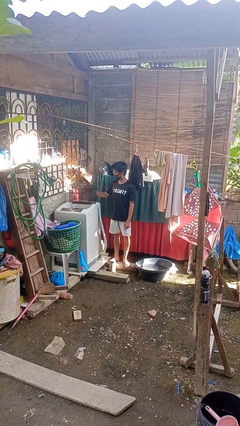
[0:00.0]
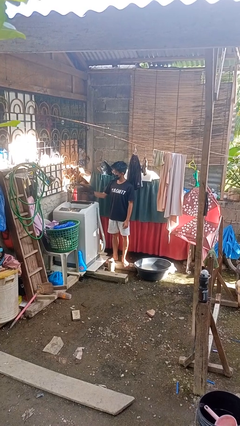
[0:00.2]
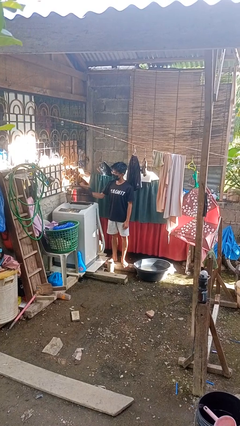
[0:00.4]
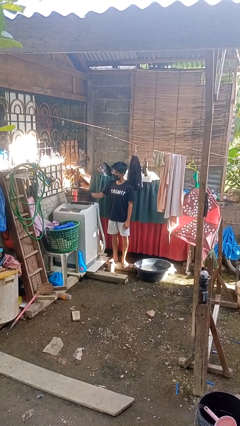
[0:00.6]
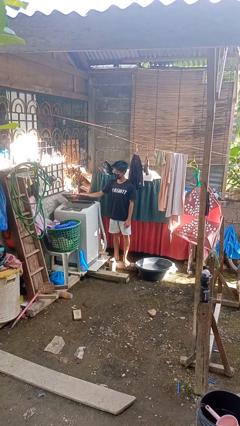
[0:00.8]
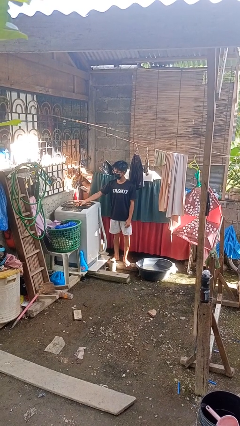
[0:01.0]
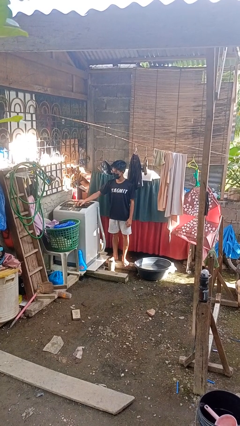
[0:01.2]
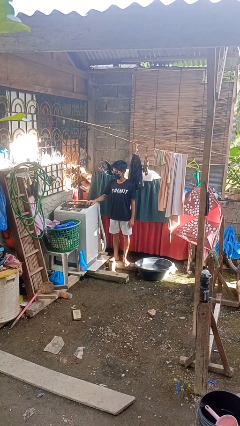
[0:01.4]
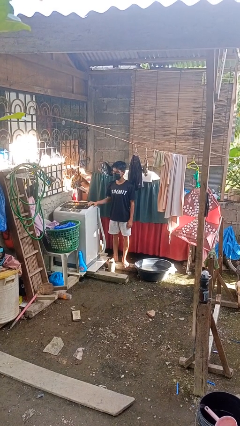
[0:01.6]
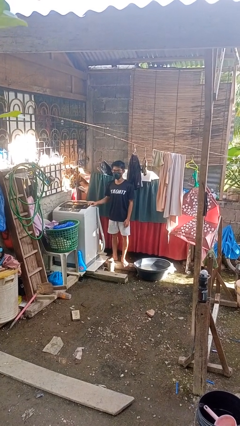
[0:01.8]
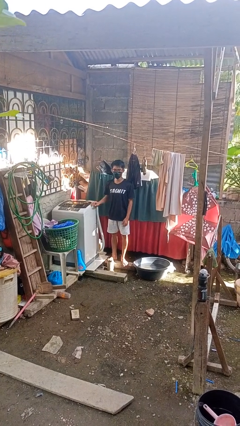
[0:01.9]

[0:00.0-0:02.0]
person closes clothes washer

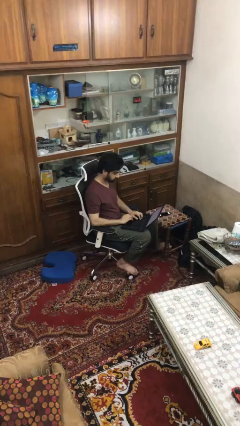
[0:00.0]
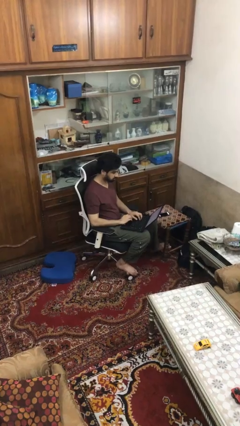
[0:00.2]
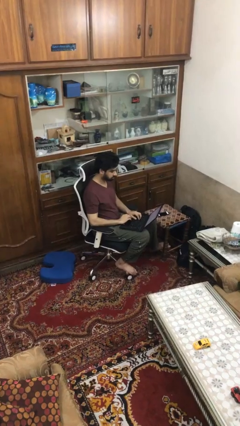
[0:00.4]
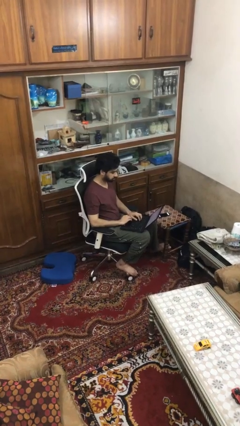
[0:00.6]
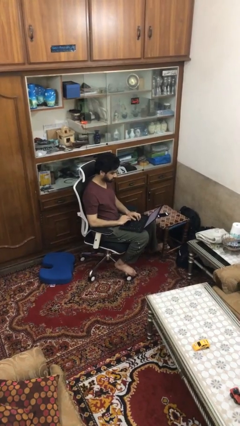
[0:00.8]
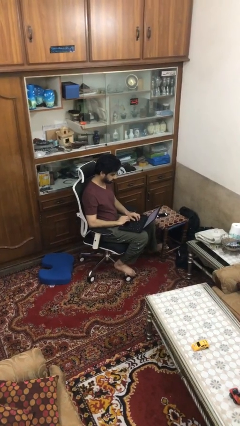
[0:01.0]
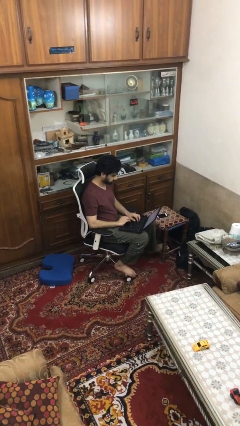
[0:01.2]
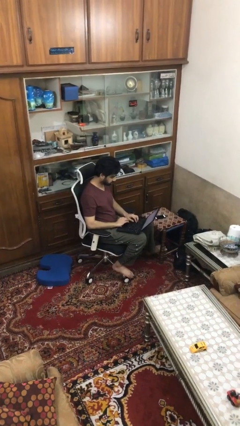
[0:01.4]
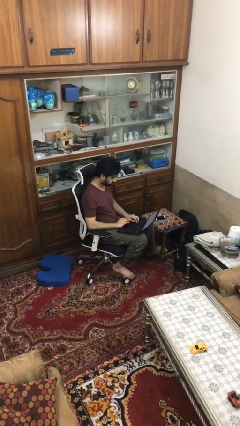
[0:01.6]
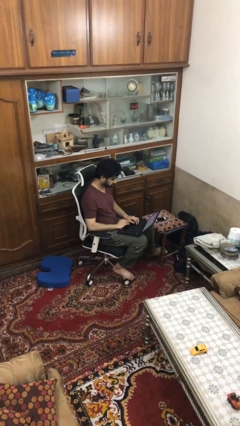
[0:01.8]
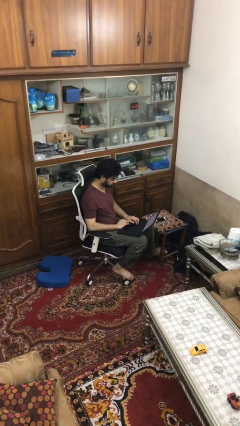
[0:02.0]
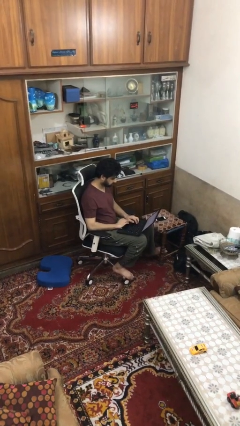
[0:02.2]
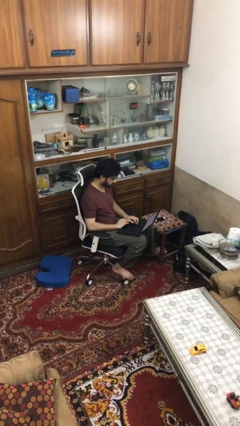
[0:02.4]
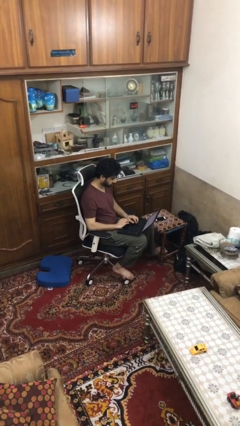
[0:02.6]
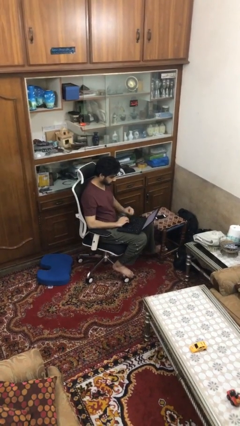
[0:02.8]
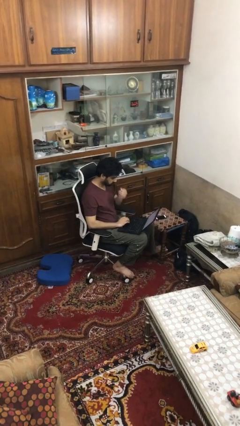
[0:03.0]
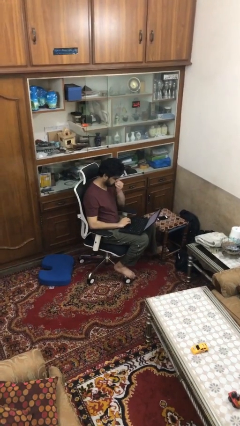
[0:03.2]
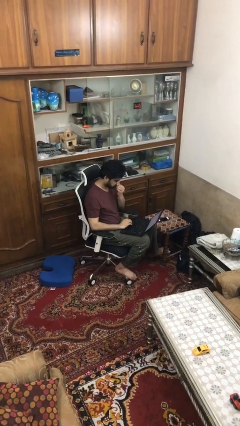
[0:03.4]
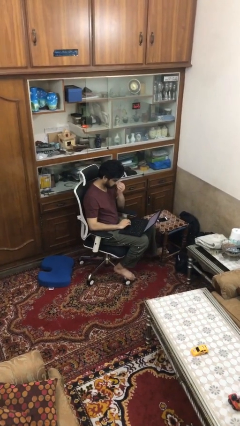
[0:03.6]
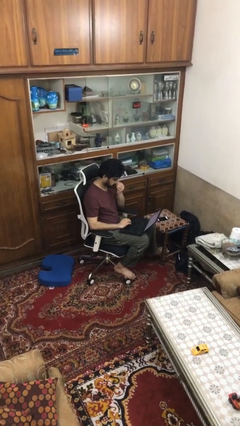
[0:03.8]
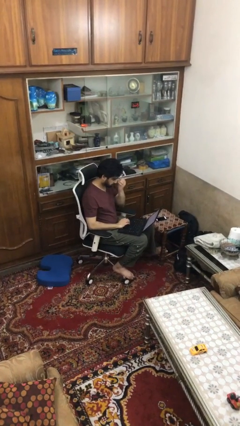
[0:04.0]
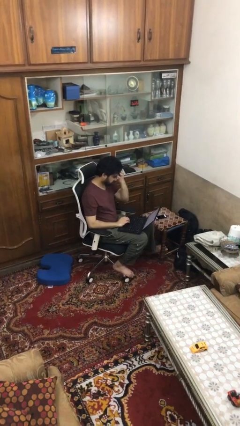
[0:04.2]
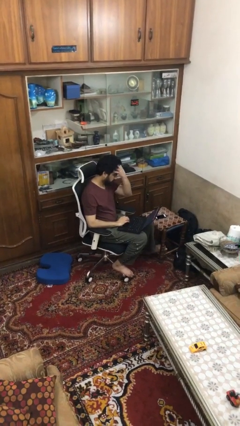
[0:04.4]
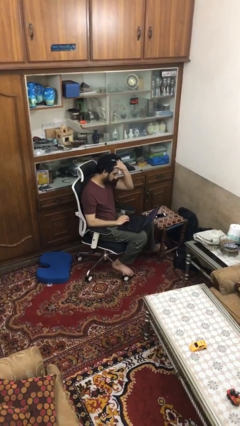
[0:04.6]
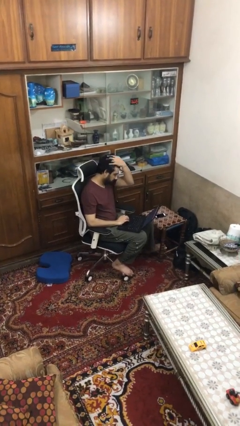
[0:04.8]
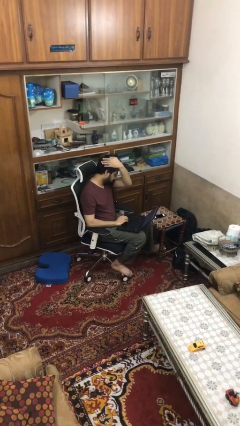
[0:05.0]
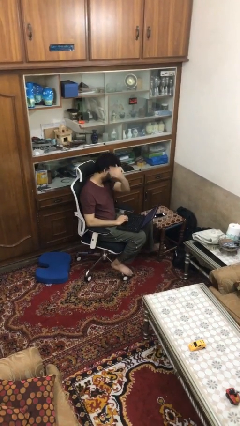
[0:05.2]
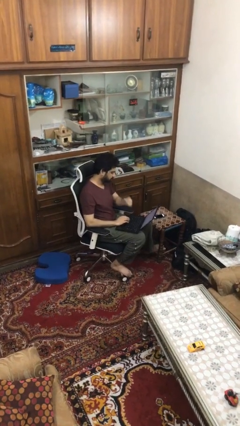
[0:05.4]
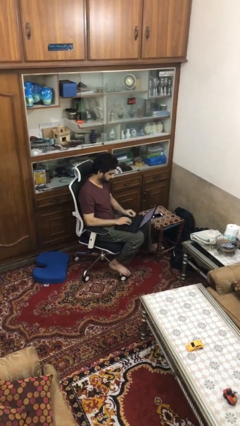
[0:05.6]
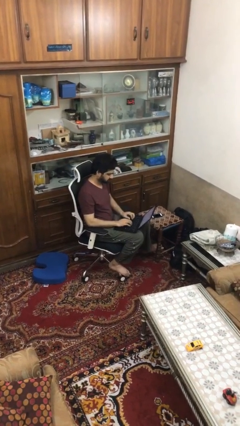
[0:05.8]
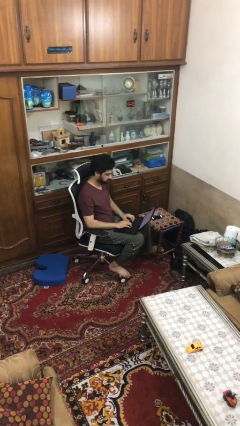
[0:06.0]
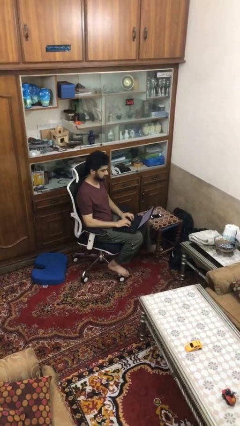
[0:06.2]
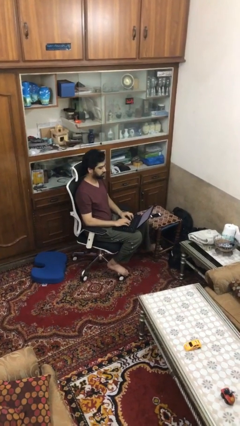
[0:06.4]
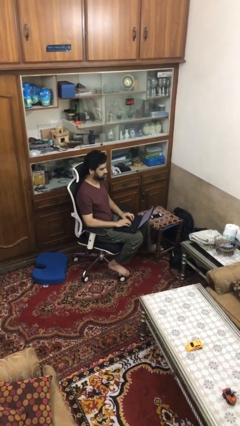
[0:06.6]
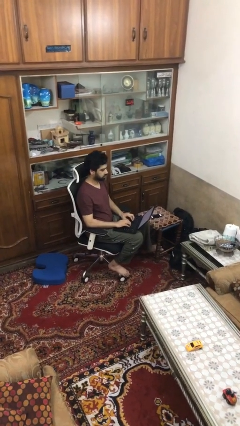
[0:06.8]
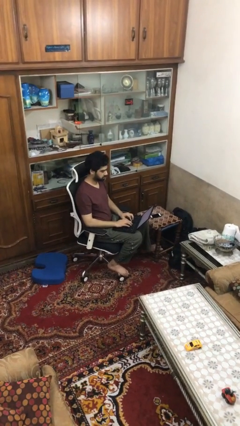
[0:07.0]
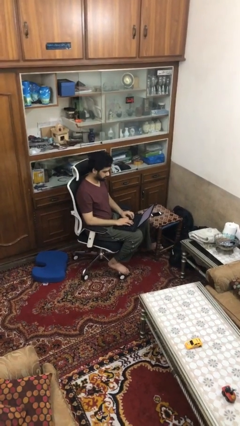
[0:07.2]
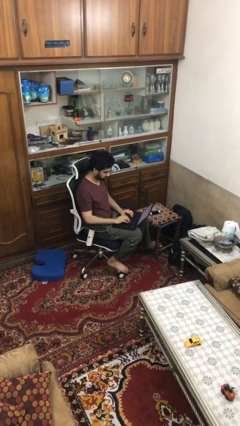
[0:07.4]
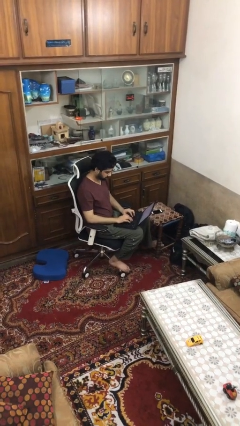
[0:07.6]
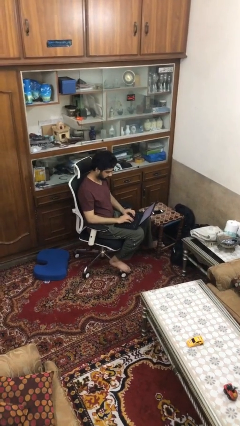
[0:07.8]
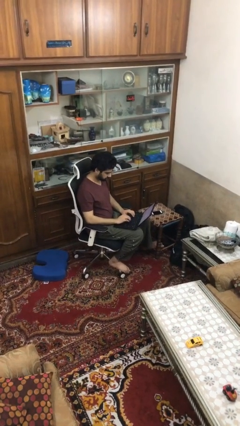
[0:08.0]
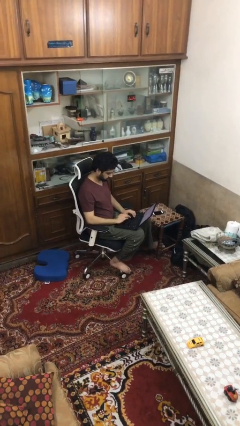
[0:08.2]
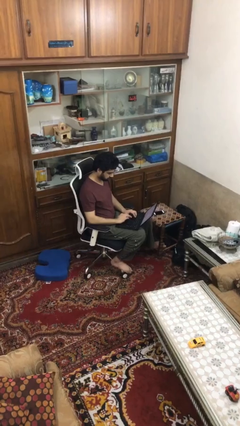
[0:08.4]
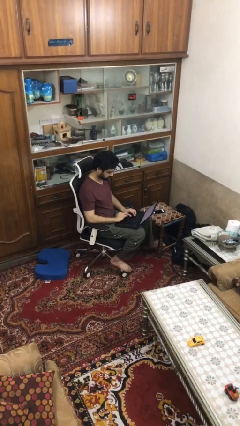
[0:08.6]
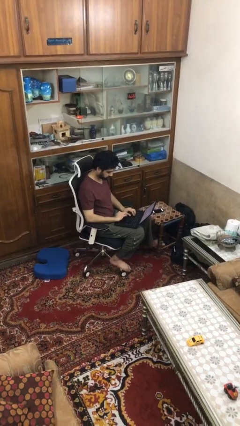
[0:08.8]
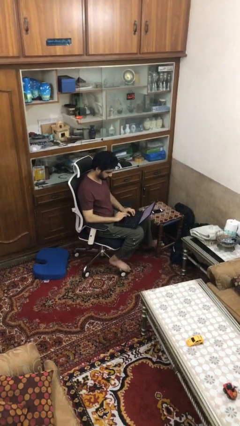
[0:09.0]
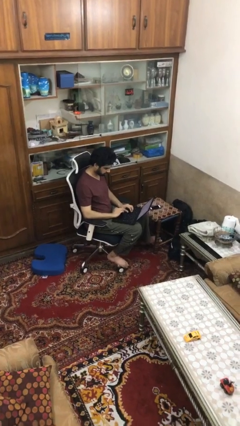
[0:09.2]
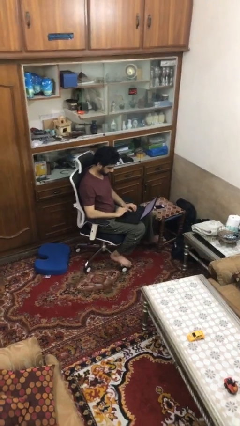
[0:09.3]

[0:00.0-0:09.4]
person interacts with laptop

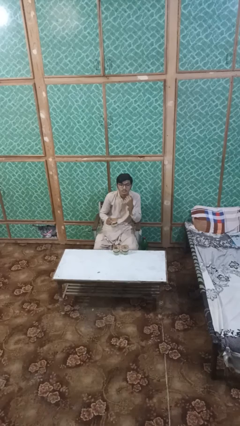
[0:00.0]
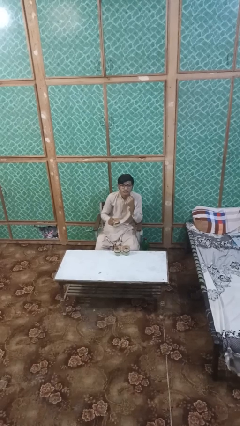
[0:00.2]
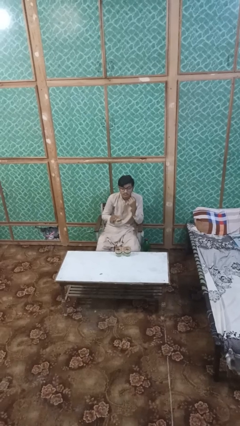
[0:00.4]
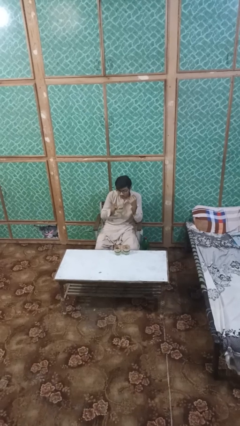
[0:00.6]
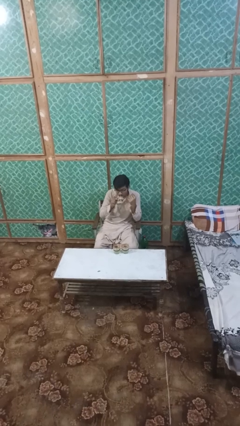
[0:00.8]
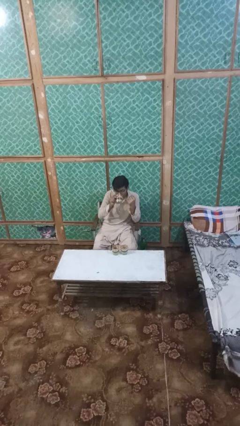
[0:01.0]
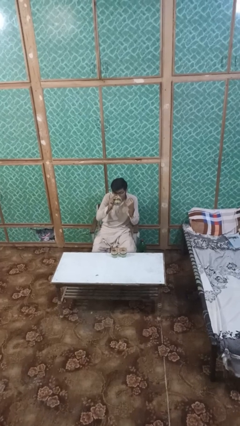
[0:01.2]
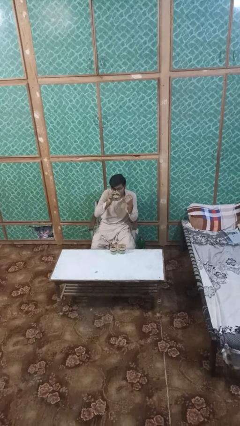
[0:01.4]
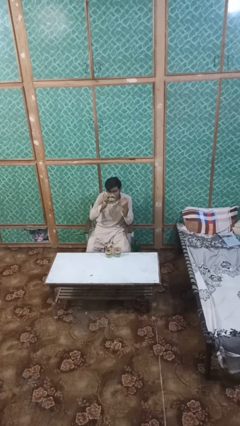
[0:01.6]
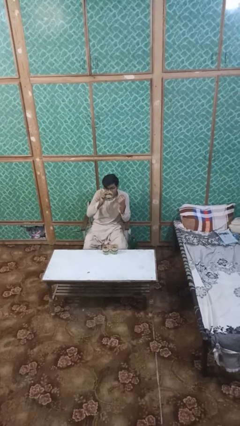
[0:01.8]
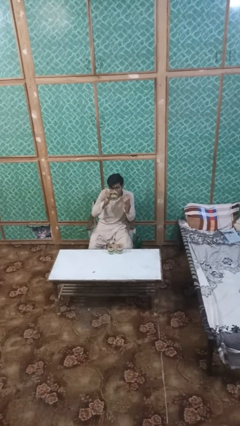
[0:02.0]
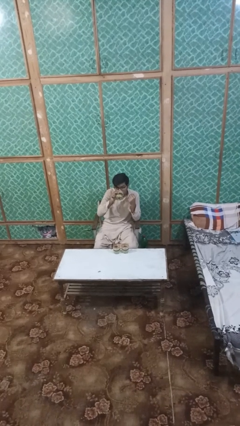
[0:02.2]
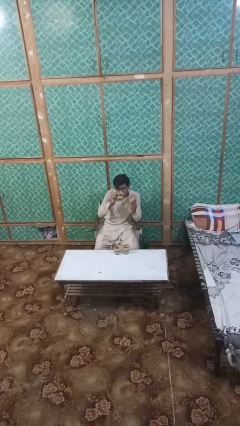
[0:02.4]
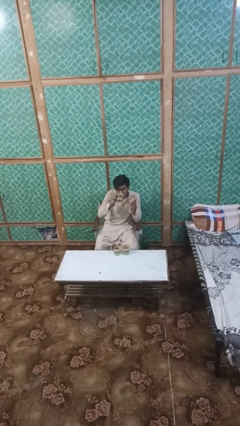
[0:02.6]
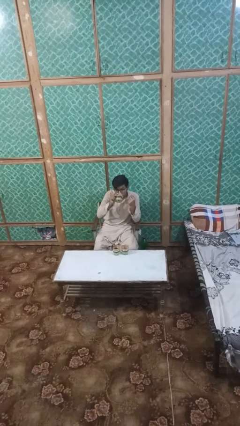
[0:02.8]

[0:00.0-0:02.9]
person drinks from shotglass

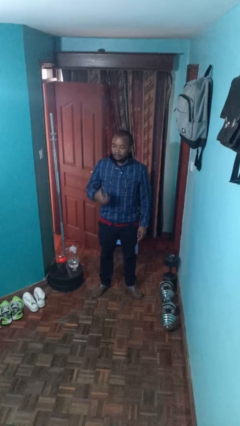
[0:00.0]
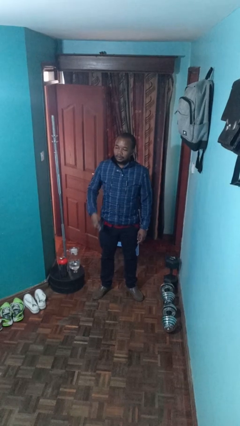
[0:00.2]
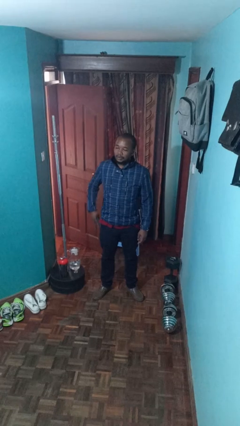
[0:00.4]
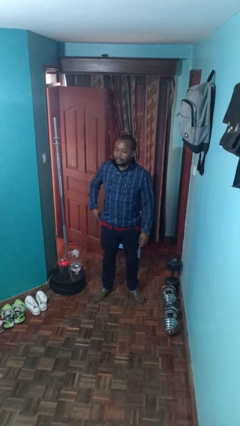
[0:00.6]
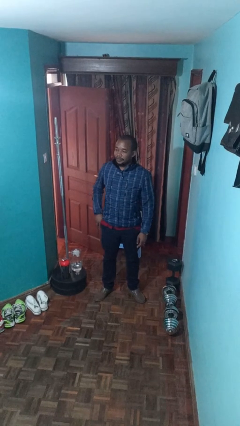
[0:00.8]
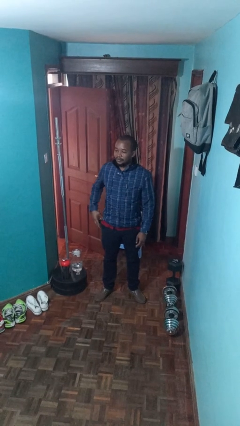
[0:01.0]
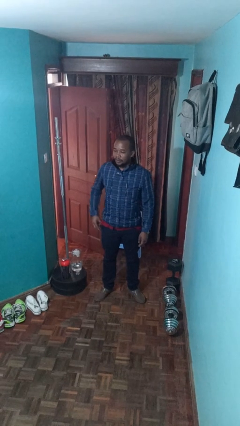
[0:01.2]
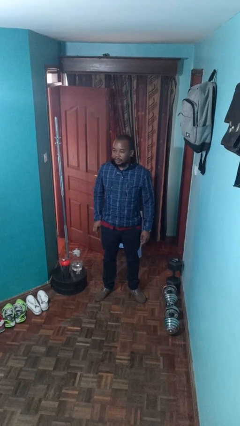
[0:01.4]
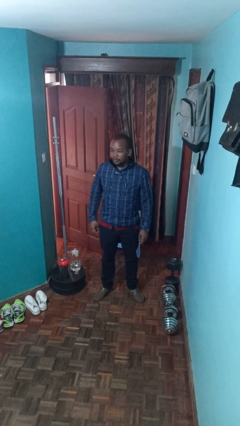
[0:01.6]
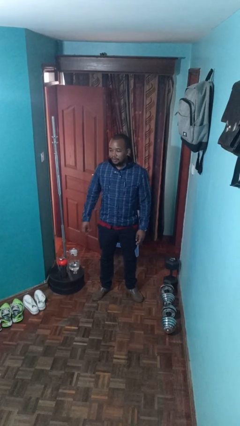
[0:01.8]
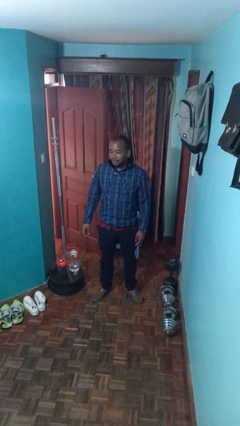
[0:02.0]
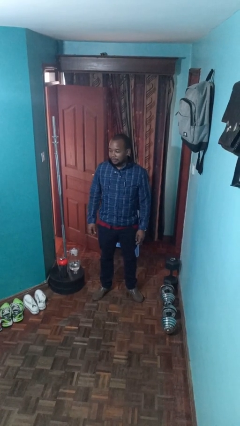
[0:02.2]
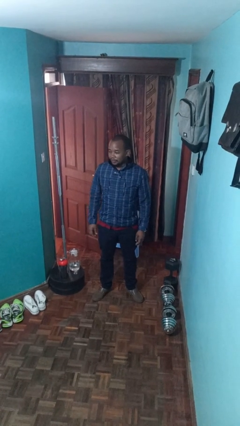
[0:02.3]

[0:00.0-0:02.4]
person puts phone into pocket

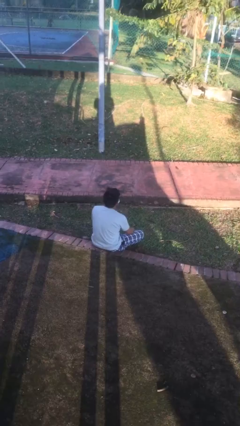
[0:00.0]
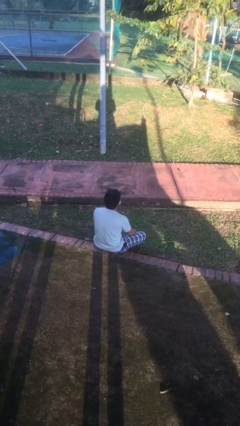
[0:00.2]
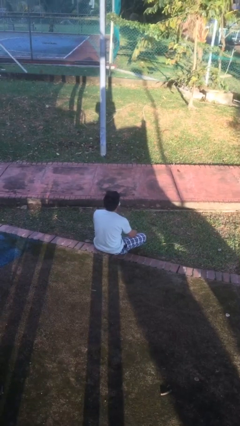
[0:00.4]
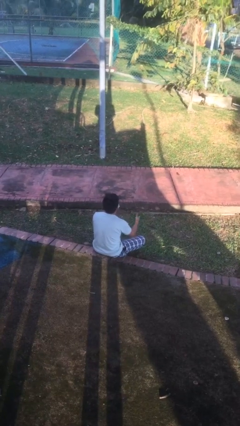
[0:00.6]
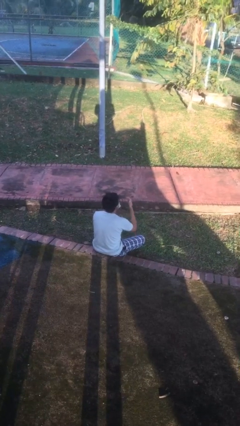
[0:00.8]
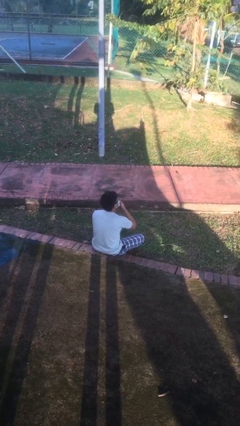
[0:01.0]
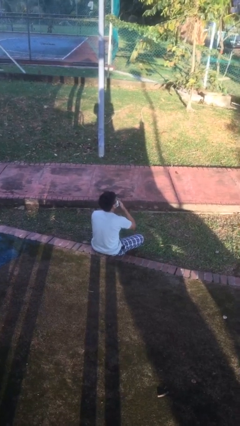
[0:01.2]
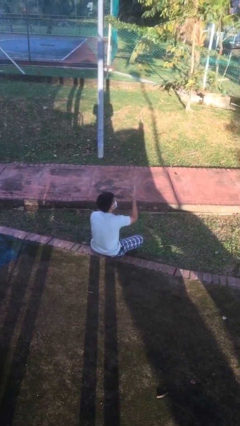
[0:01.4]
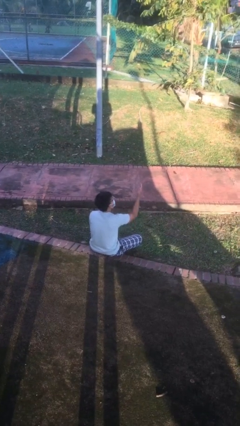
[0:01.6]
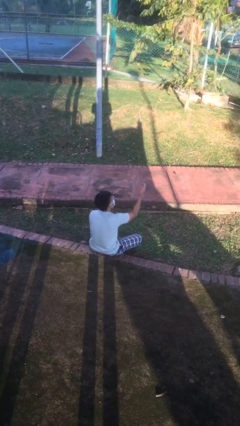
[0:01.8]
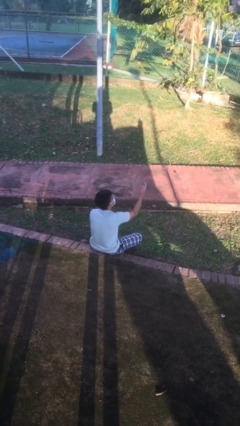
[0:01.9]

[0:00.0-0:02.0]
person gestures blow kiss
